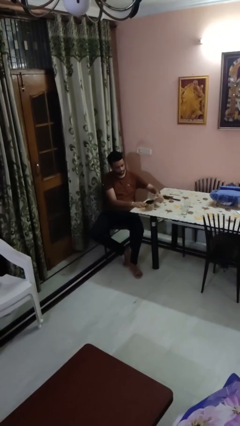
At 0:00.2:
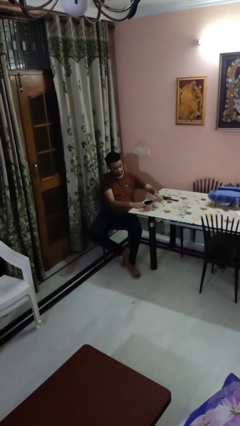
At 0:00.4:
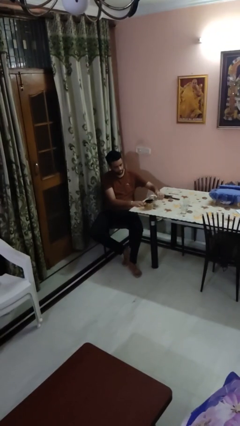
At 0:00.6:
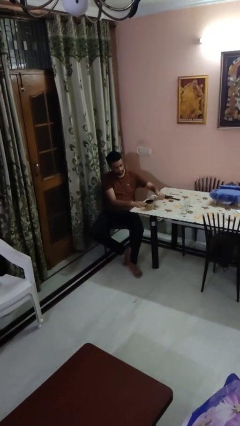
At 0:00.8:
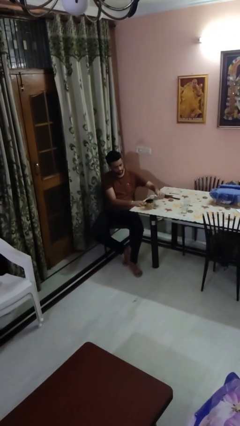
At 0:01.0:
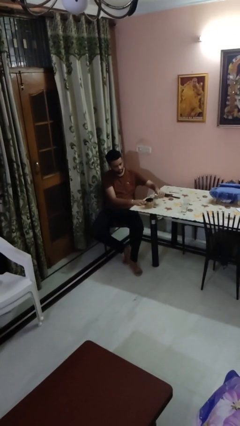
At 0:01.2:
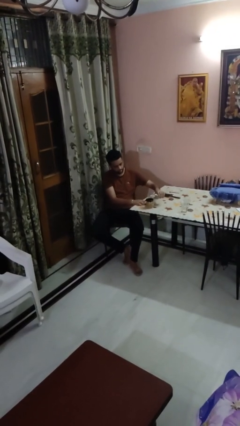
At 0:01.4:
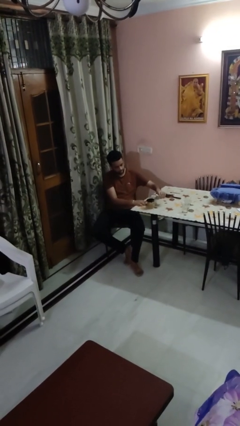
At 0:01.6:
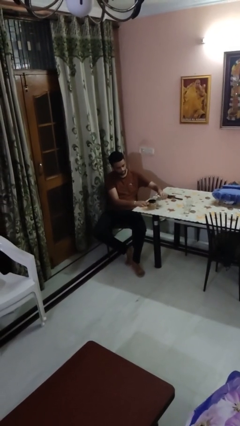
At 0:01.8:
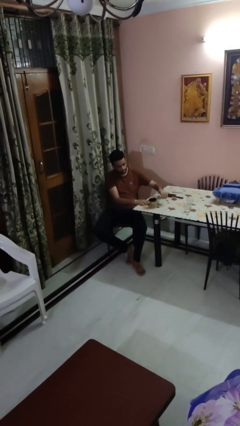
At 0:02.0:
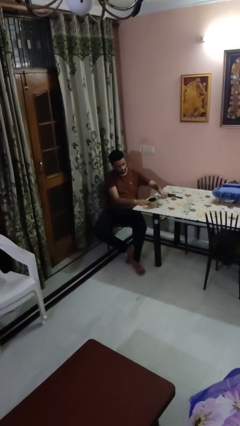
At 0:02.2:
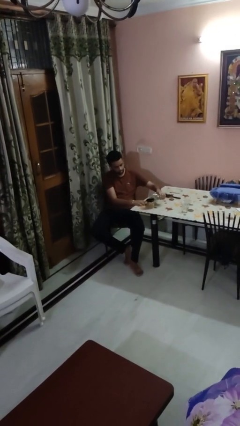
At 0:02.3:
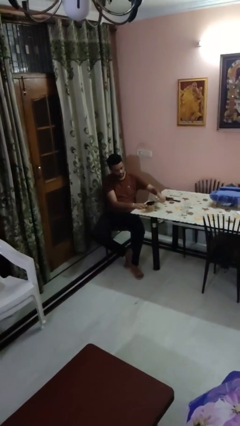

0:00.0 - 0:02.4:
person pours liquid into cup

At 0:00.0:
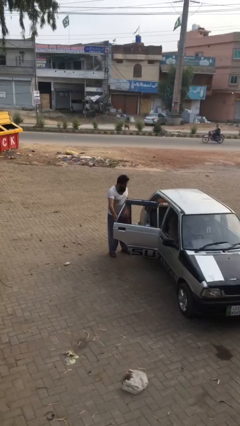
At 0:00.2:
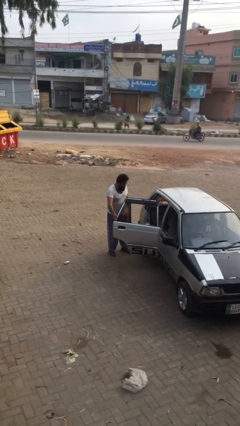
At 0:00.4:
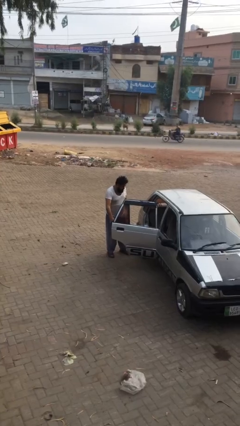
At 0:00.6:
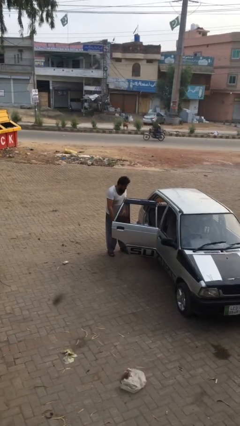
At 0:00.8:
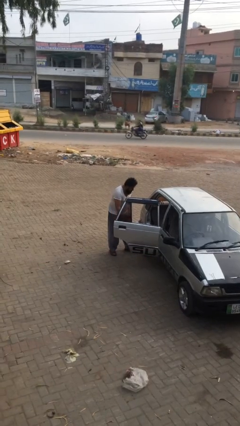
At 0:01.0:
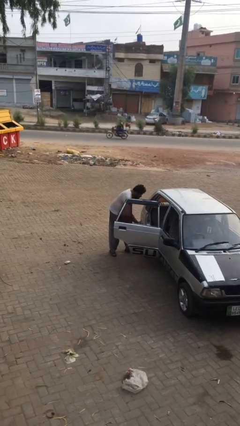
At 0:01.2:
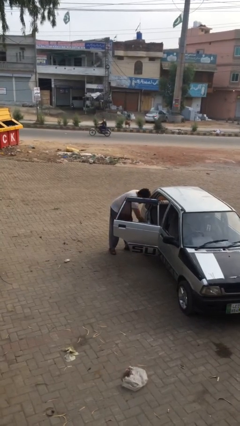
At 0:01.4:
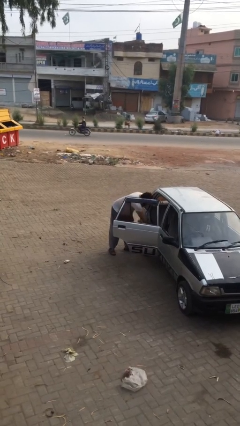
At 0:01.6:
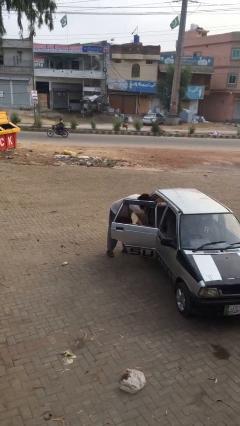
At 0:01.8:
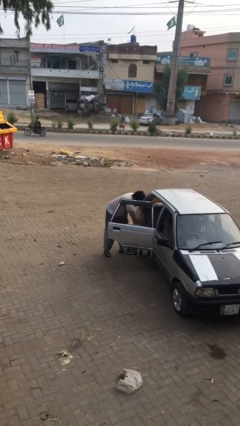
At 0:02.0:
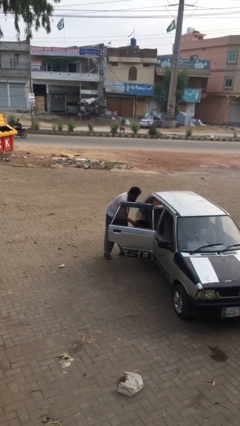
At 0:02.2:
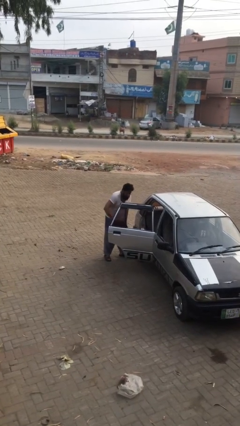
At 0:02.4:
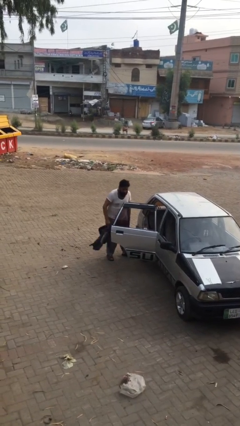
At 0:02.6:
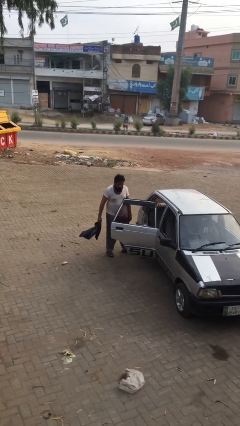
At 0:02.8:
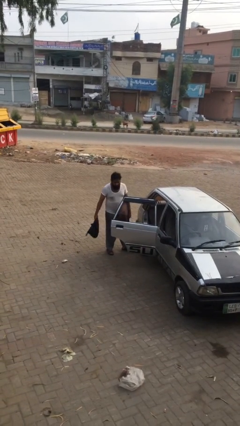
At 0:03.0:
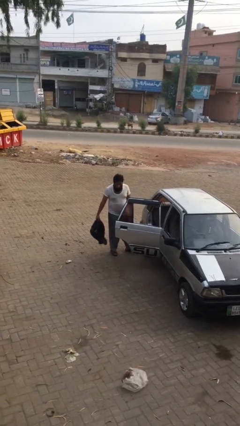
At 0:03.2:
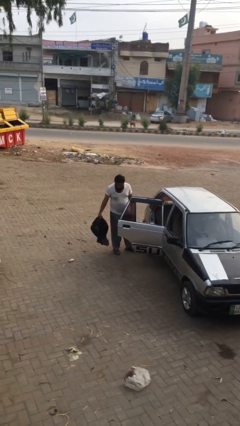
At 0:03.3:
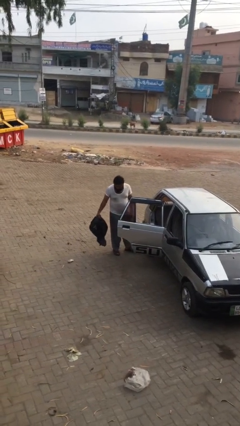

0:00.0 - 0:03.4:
person unloads car

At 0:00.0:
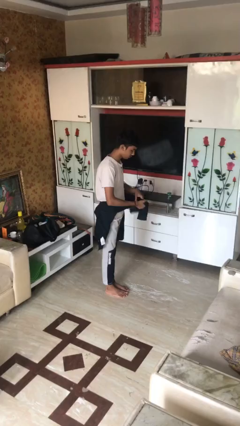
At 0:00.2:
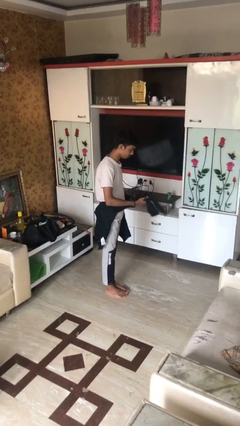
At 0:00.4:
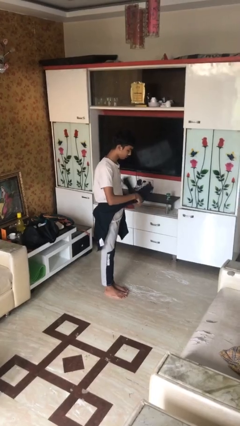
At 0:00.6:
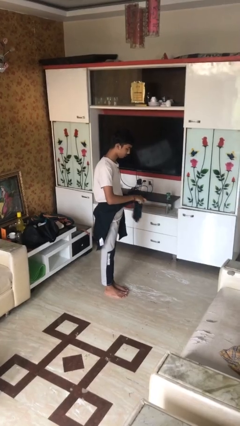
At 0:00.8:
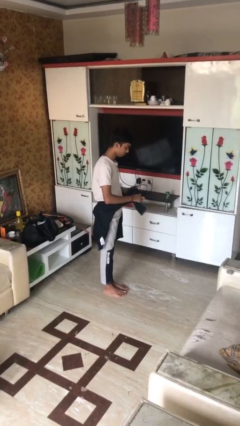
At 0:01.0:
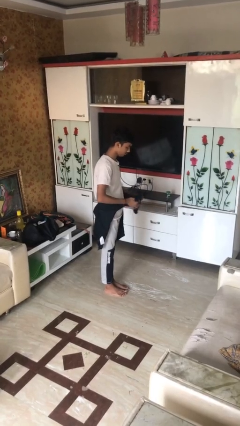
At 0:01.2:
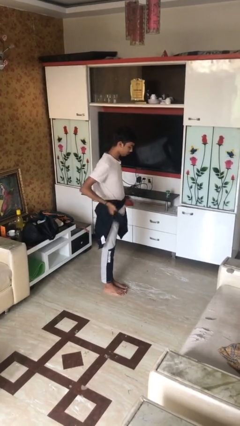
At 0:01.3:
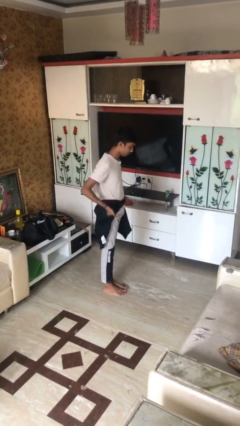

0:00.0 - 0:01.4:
person ties jacket around waist

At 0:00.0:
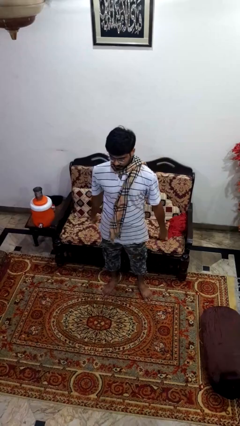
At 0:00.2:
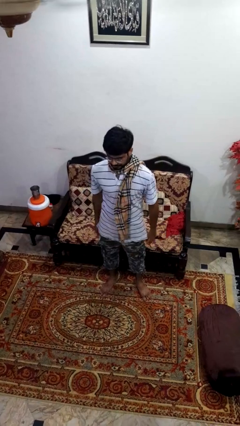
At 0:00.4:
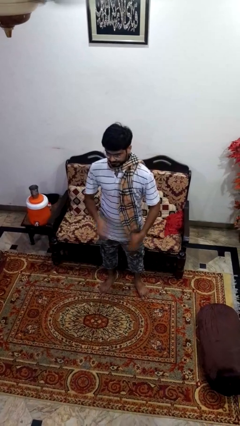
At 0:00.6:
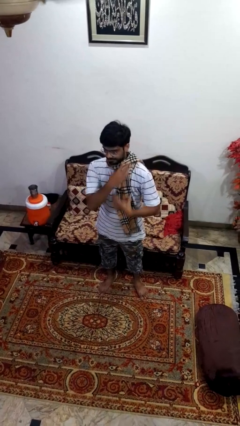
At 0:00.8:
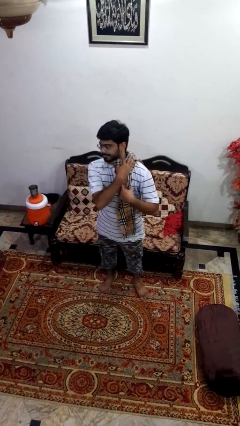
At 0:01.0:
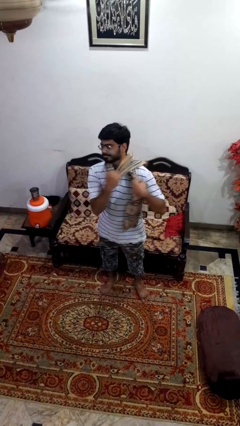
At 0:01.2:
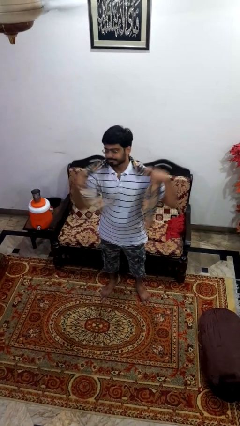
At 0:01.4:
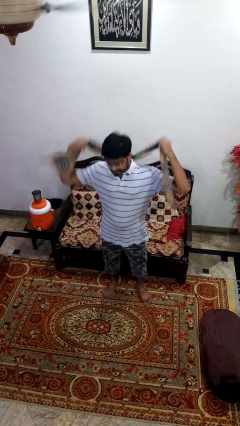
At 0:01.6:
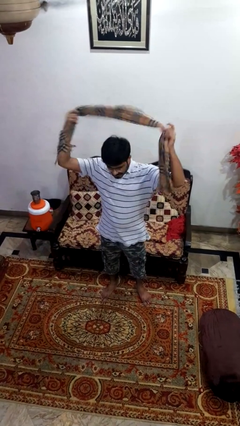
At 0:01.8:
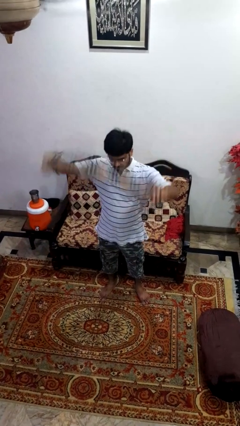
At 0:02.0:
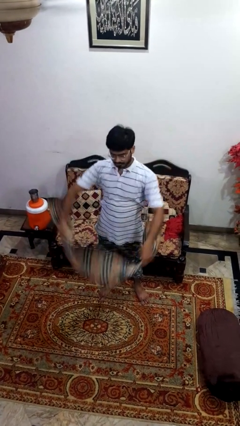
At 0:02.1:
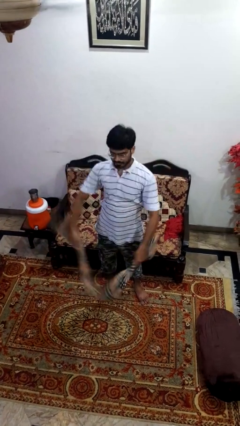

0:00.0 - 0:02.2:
person takes off scarf

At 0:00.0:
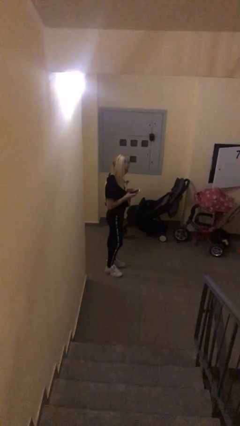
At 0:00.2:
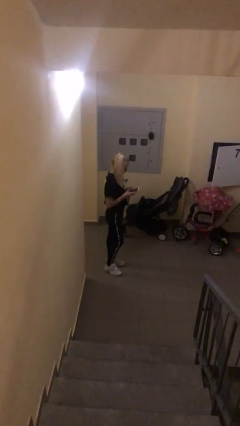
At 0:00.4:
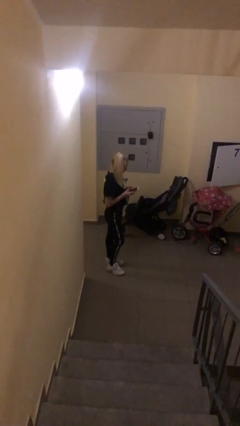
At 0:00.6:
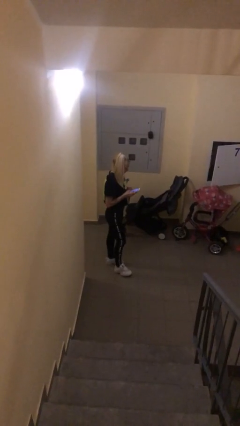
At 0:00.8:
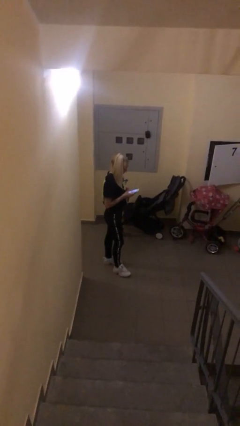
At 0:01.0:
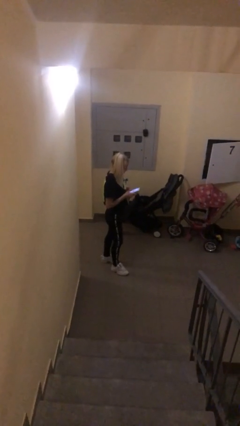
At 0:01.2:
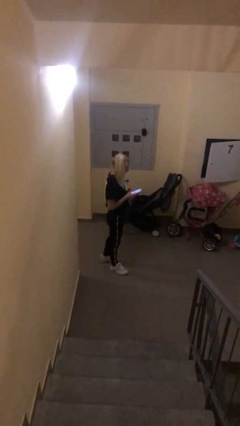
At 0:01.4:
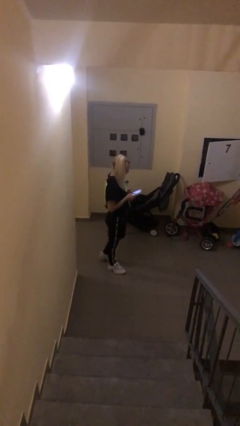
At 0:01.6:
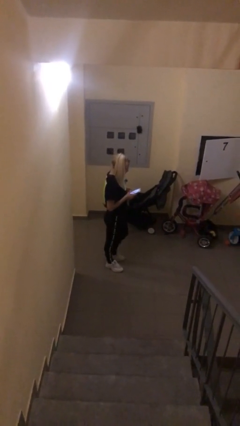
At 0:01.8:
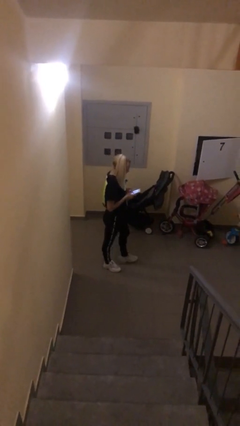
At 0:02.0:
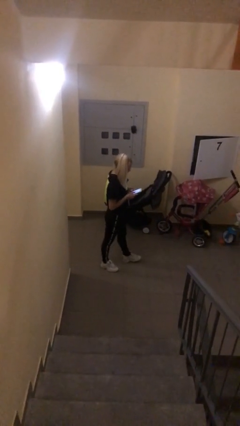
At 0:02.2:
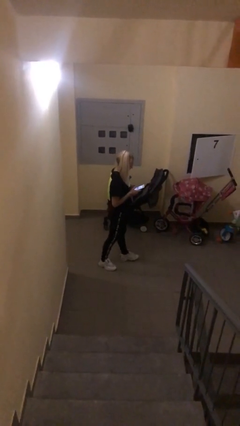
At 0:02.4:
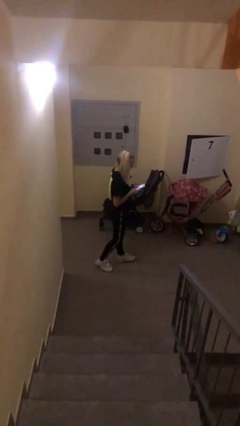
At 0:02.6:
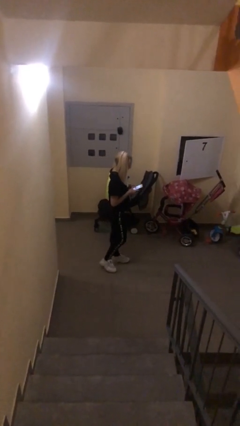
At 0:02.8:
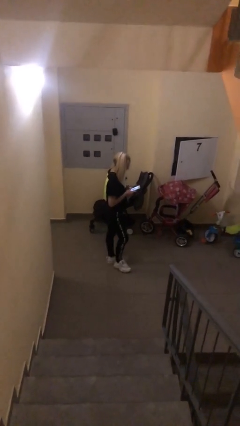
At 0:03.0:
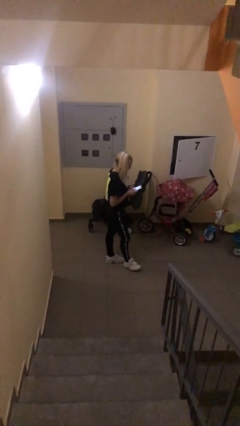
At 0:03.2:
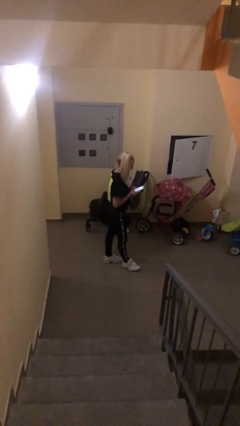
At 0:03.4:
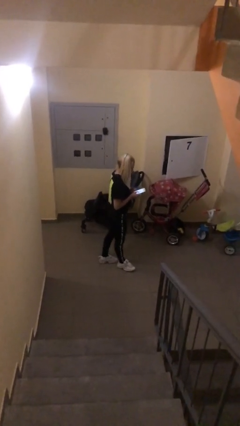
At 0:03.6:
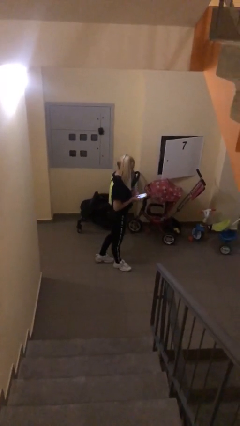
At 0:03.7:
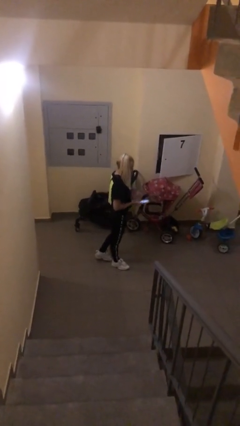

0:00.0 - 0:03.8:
person texts on phone

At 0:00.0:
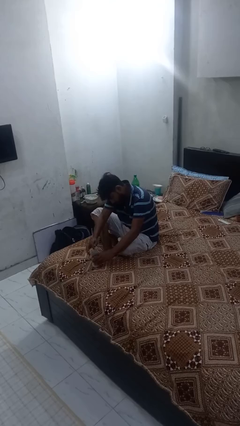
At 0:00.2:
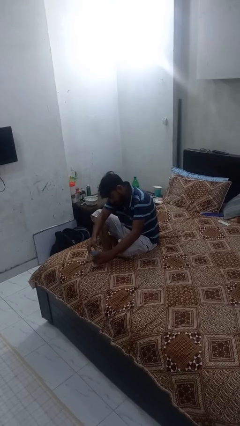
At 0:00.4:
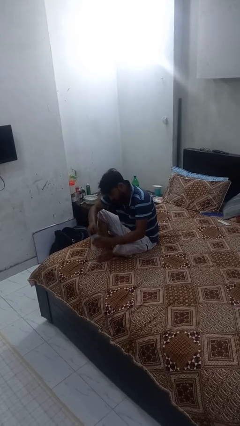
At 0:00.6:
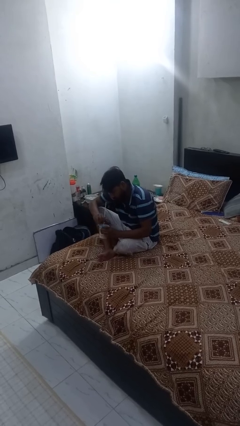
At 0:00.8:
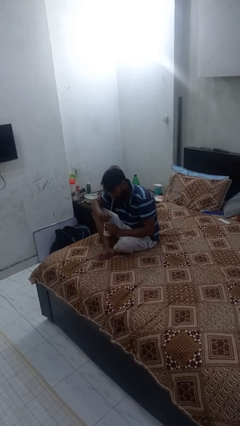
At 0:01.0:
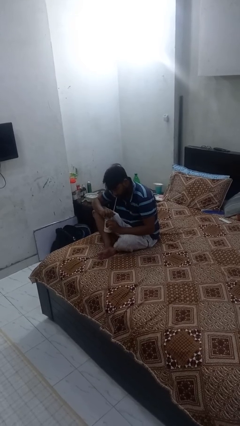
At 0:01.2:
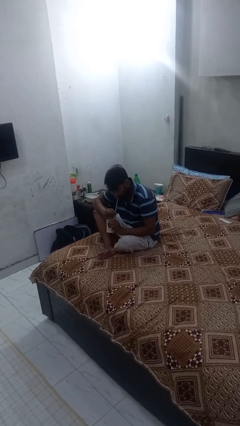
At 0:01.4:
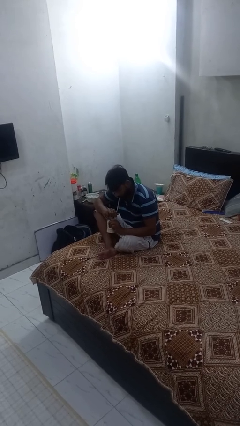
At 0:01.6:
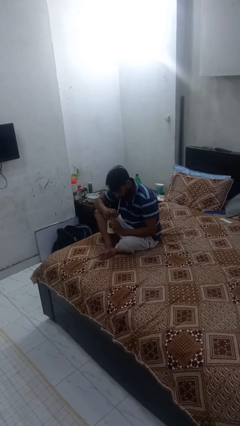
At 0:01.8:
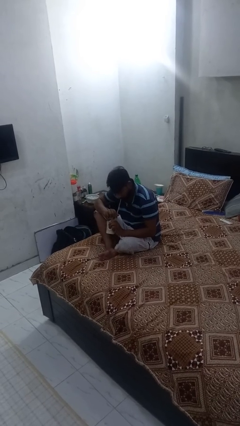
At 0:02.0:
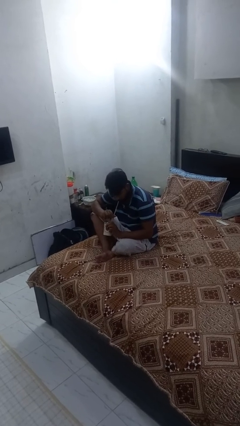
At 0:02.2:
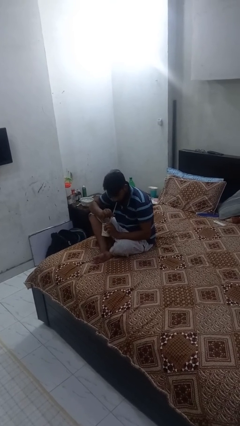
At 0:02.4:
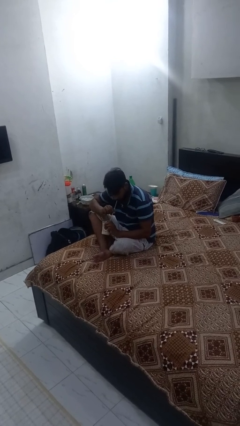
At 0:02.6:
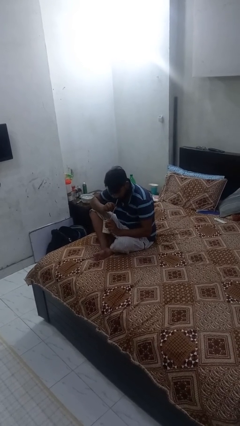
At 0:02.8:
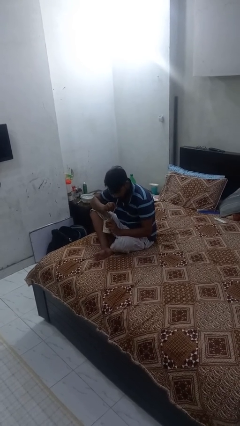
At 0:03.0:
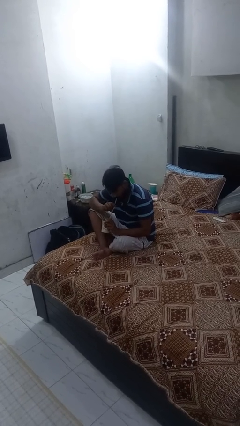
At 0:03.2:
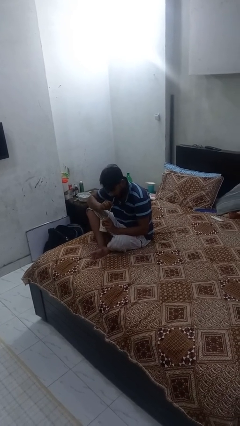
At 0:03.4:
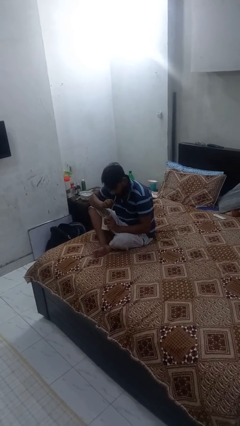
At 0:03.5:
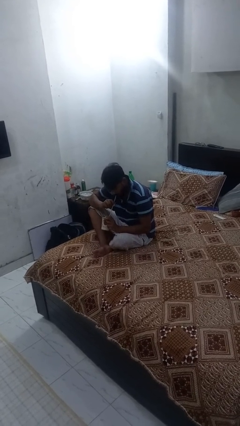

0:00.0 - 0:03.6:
person drinks from straw

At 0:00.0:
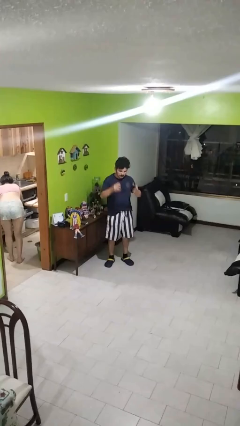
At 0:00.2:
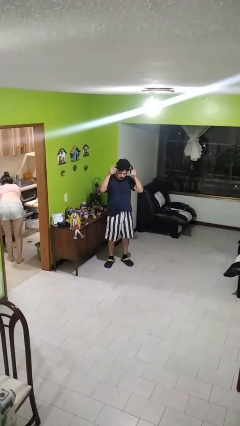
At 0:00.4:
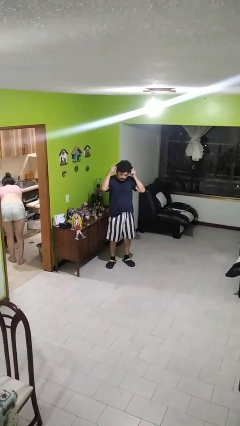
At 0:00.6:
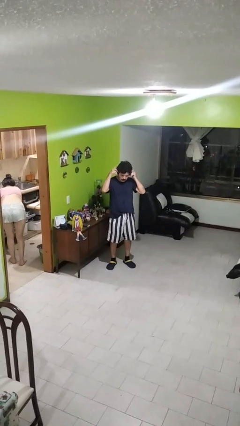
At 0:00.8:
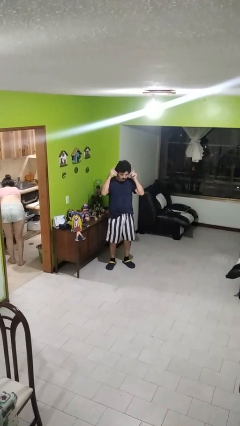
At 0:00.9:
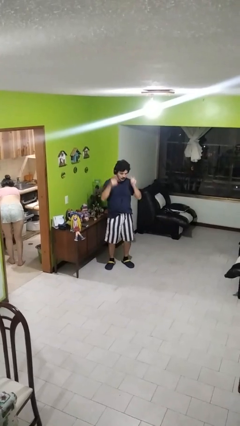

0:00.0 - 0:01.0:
person puts on headphones
